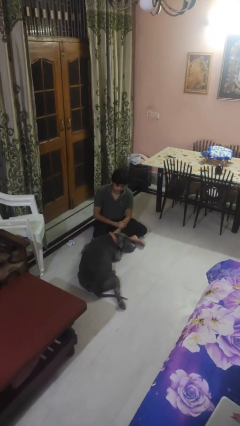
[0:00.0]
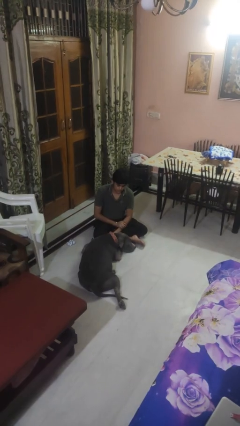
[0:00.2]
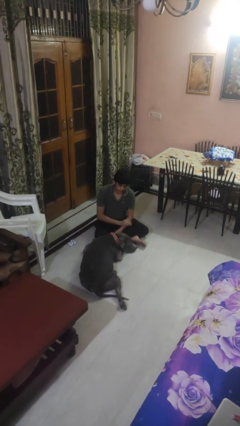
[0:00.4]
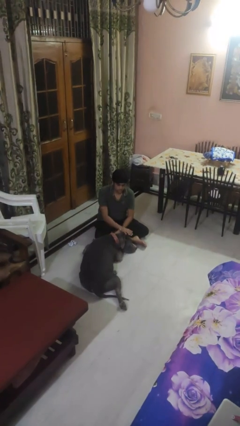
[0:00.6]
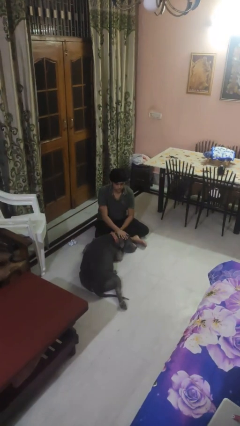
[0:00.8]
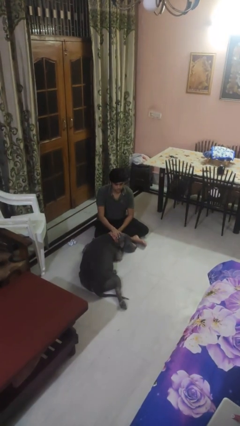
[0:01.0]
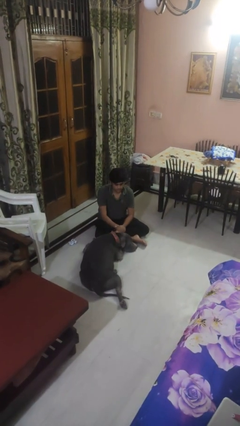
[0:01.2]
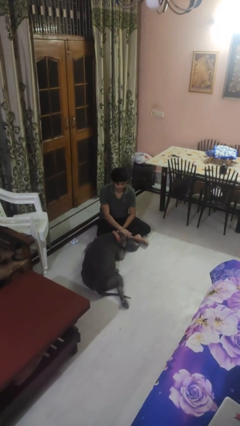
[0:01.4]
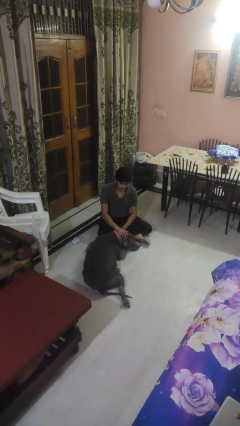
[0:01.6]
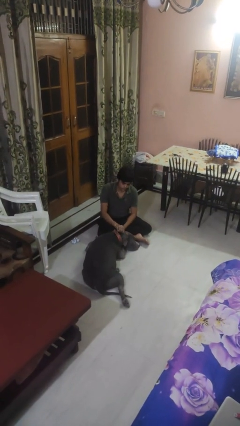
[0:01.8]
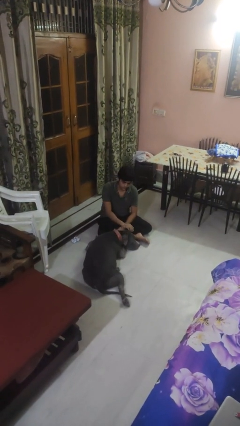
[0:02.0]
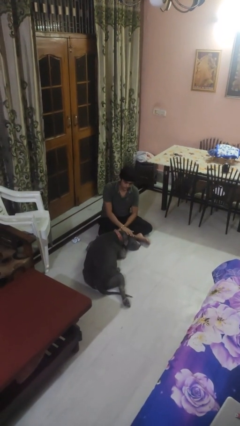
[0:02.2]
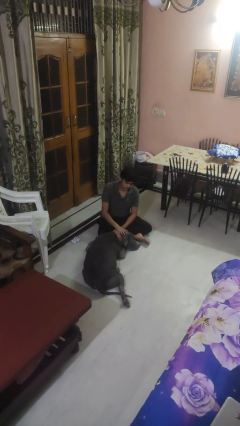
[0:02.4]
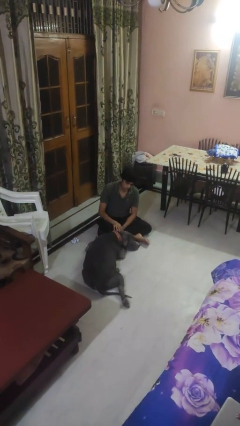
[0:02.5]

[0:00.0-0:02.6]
person pets dog

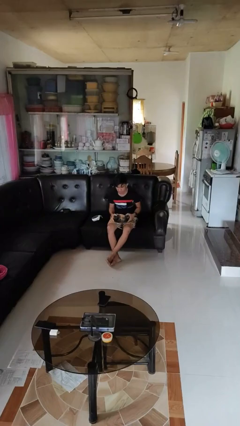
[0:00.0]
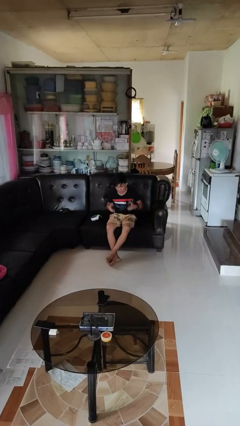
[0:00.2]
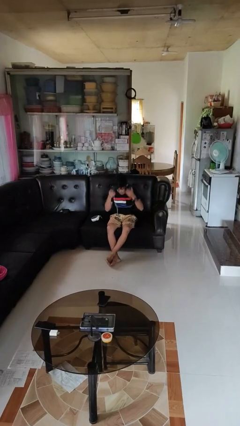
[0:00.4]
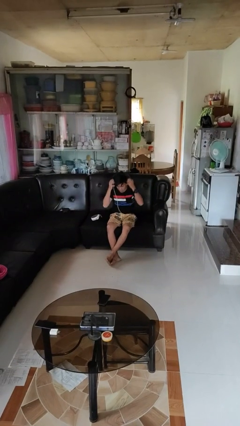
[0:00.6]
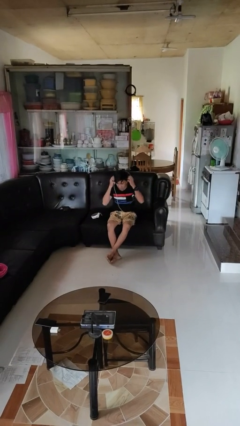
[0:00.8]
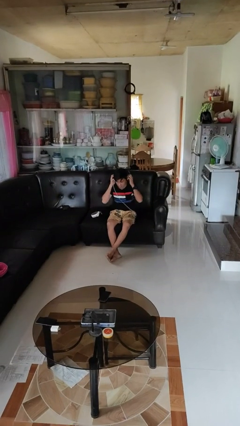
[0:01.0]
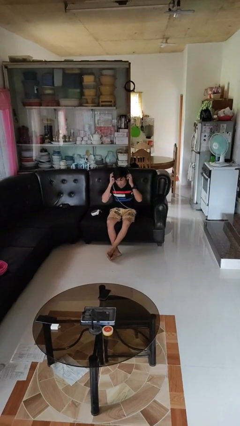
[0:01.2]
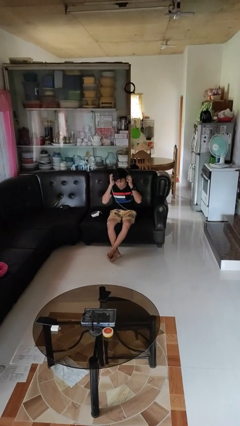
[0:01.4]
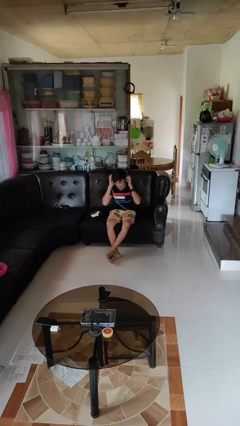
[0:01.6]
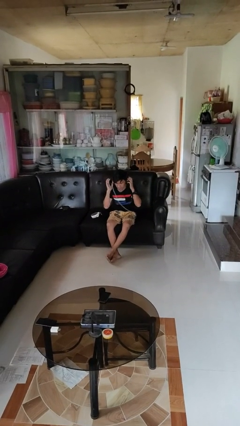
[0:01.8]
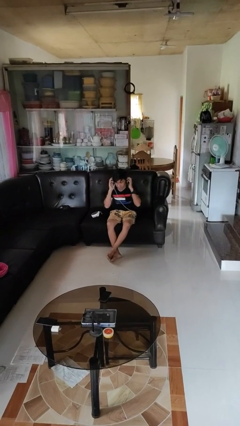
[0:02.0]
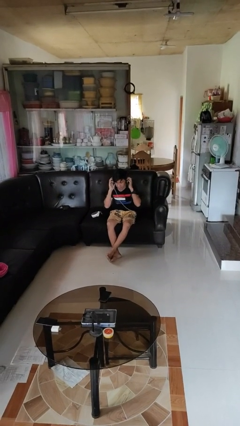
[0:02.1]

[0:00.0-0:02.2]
person puts on headphones

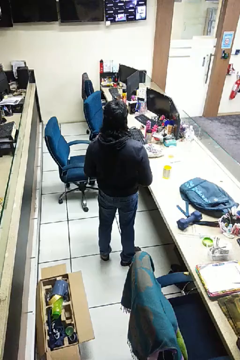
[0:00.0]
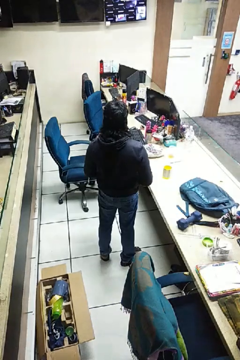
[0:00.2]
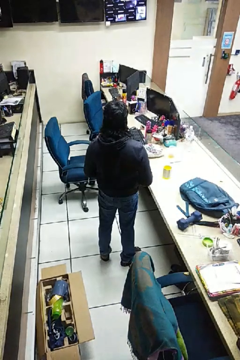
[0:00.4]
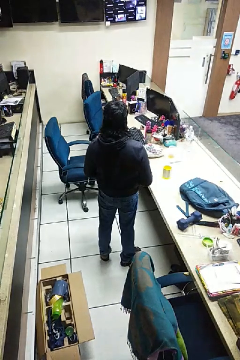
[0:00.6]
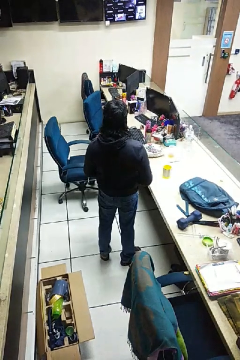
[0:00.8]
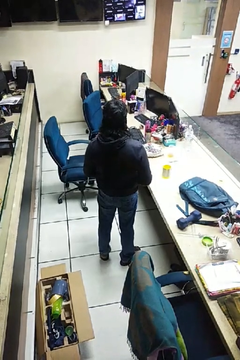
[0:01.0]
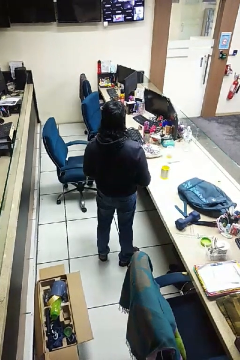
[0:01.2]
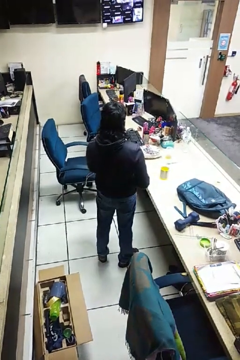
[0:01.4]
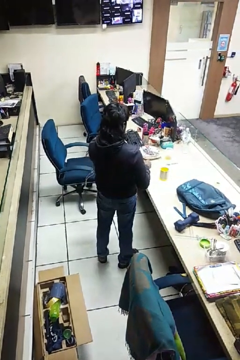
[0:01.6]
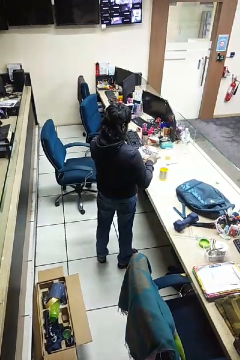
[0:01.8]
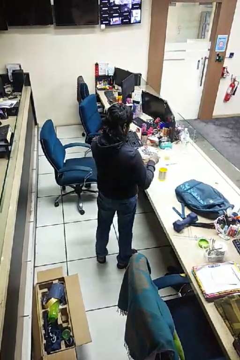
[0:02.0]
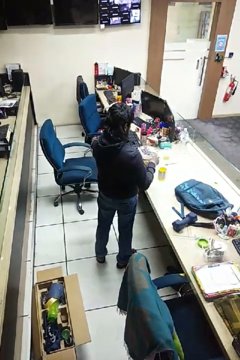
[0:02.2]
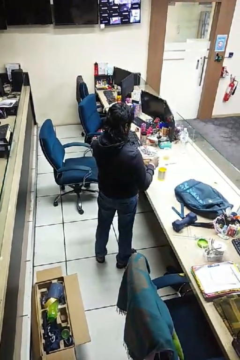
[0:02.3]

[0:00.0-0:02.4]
person opens beverage can

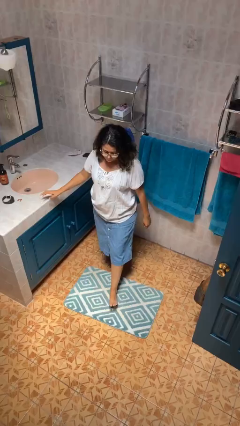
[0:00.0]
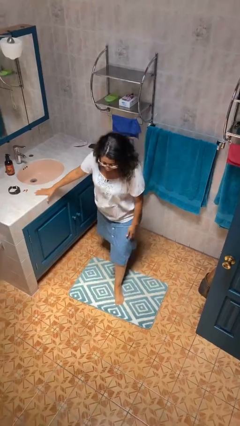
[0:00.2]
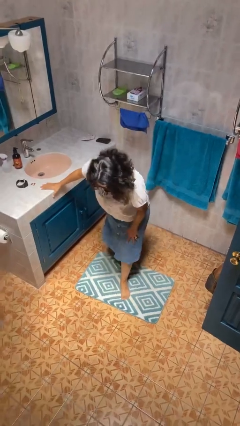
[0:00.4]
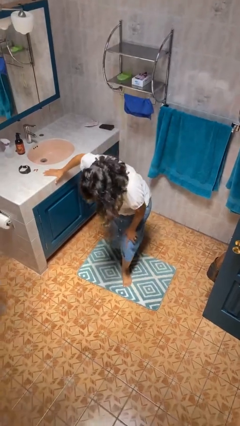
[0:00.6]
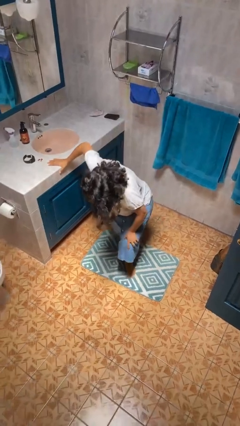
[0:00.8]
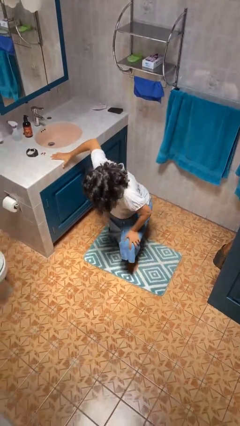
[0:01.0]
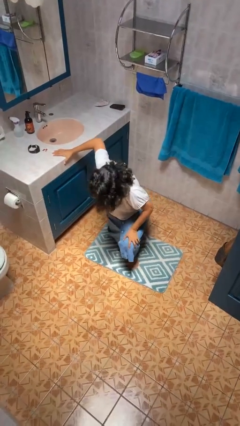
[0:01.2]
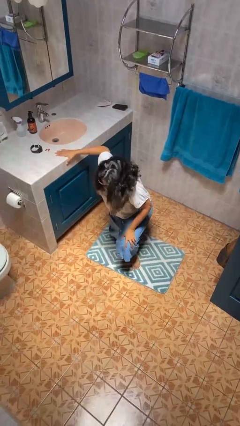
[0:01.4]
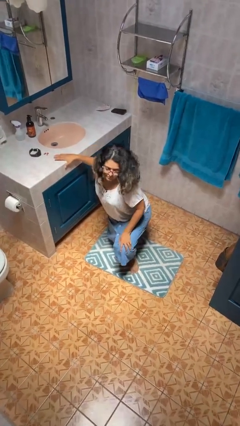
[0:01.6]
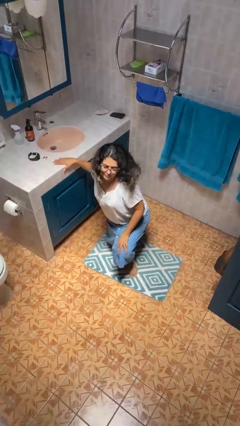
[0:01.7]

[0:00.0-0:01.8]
person kneels

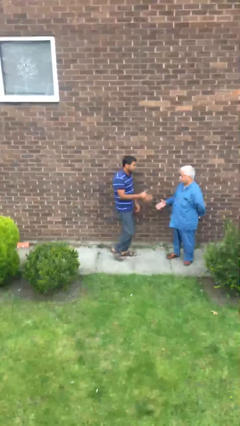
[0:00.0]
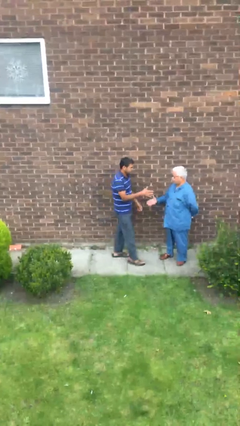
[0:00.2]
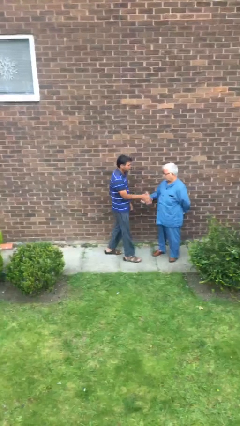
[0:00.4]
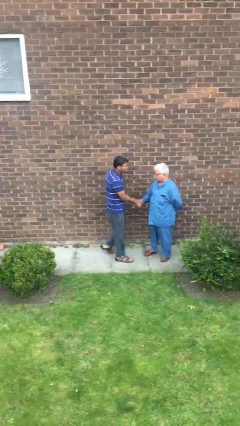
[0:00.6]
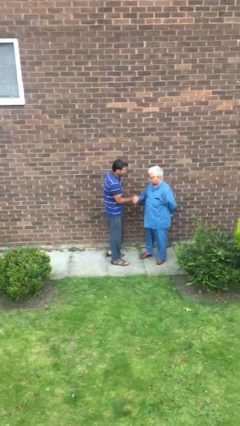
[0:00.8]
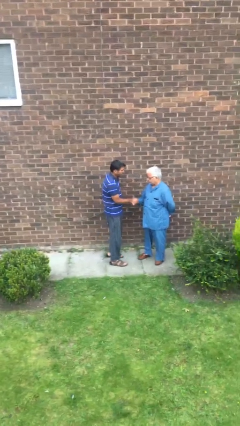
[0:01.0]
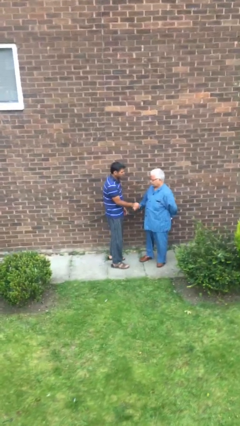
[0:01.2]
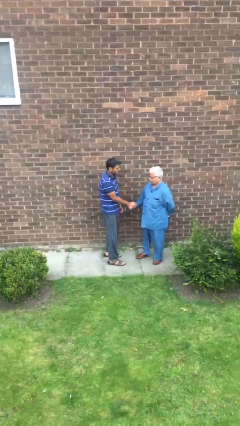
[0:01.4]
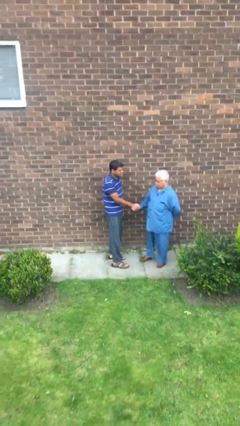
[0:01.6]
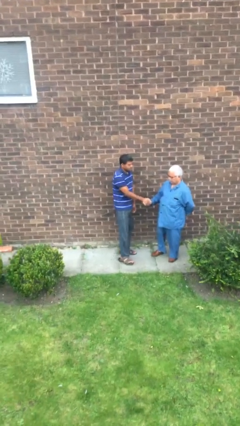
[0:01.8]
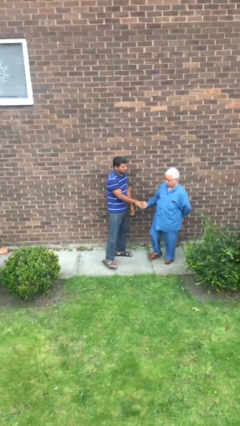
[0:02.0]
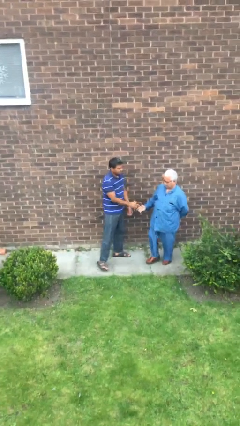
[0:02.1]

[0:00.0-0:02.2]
person shakes hand

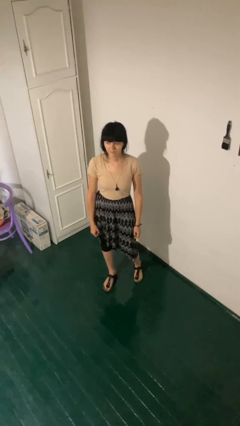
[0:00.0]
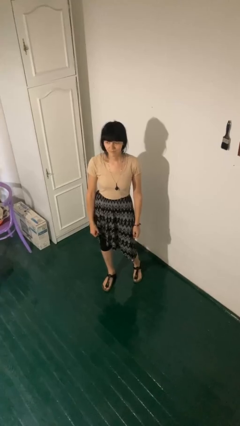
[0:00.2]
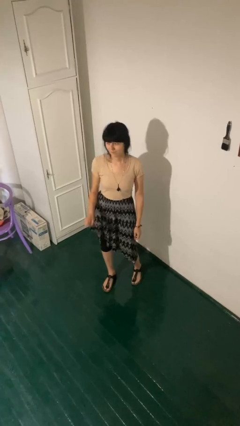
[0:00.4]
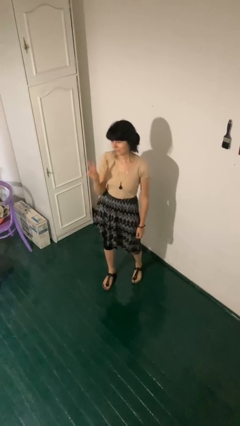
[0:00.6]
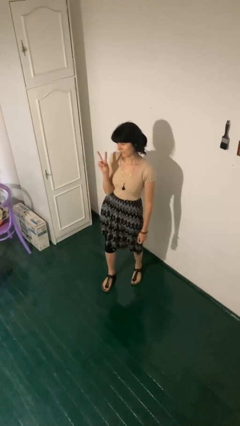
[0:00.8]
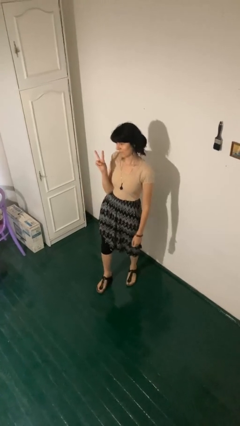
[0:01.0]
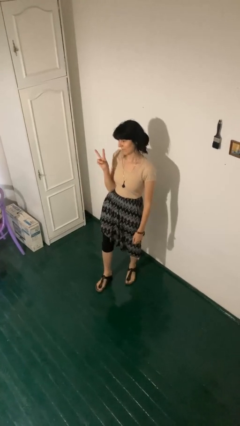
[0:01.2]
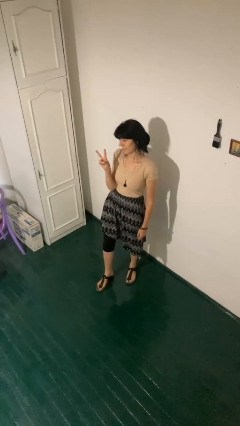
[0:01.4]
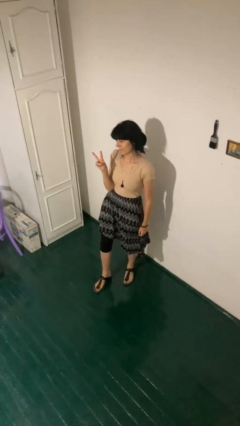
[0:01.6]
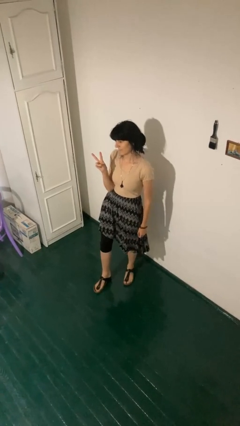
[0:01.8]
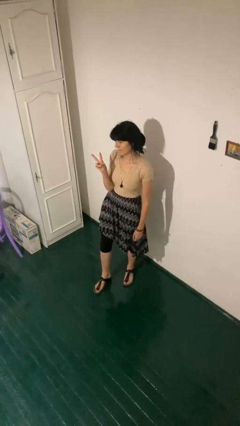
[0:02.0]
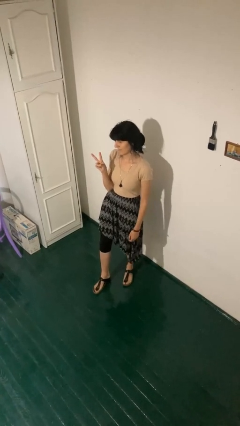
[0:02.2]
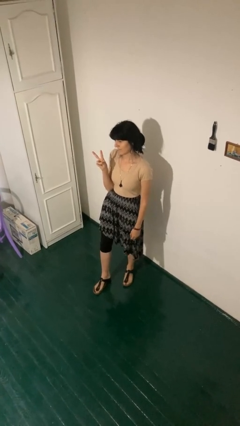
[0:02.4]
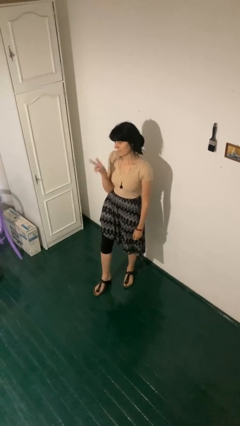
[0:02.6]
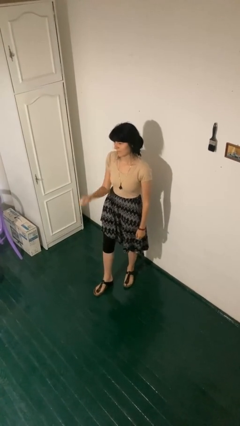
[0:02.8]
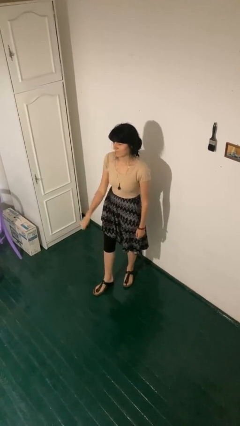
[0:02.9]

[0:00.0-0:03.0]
person gestures peace

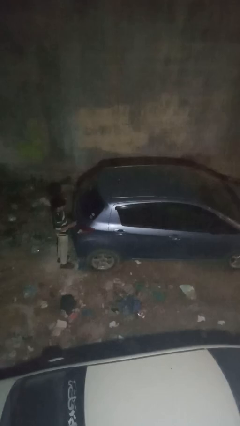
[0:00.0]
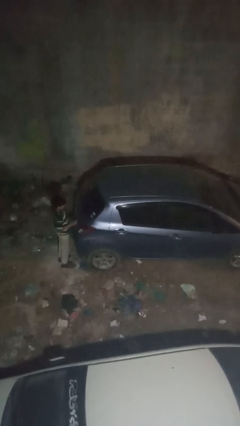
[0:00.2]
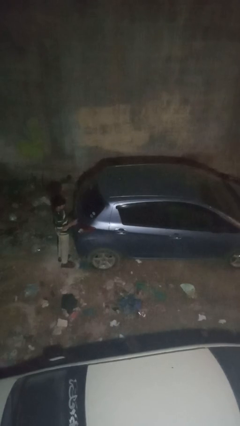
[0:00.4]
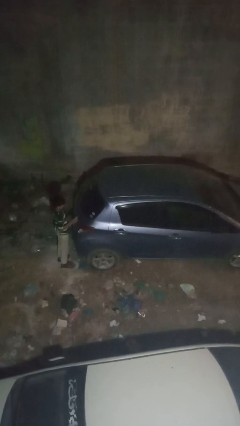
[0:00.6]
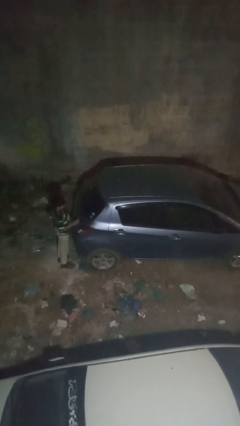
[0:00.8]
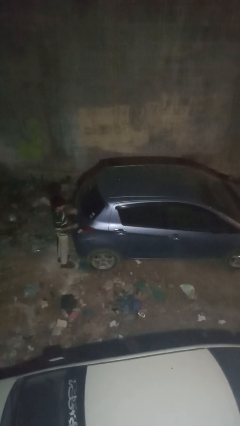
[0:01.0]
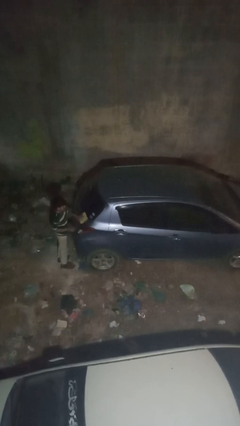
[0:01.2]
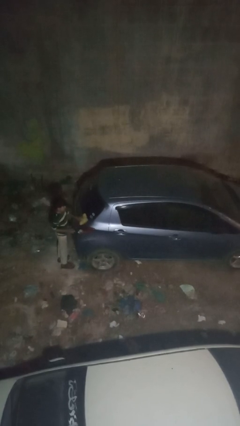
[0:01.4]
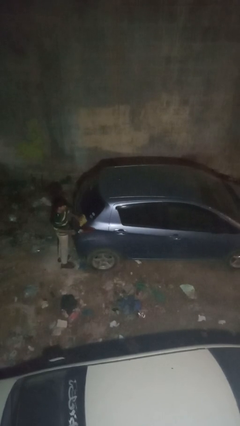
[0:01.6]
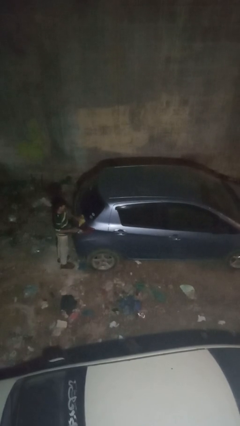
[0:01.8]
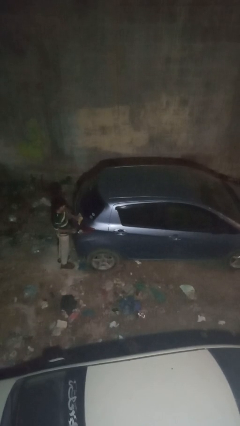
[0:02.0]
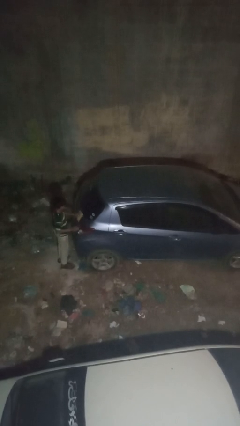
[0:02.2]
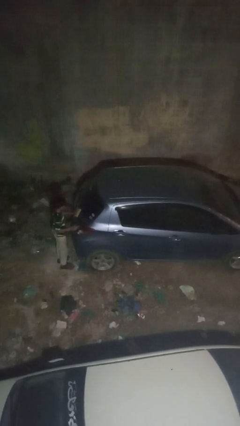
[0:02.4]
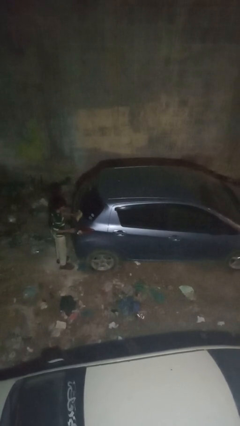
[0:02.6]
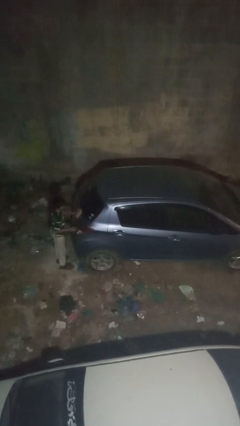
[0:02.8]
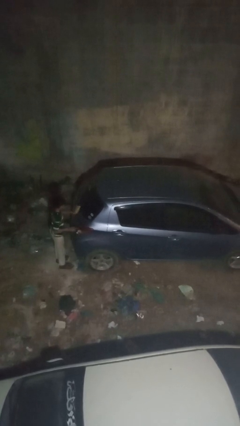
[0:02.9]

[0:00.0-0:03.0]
person polishes car with rag

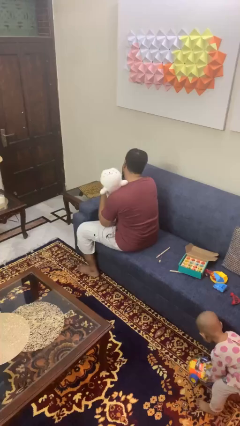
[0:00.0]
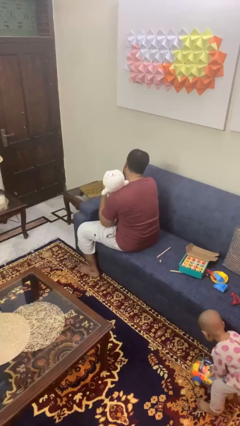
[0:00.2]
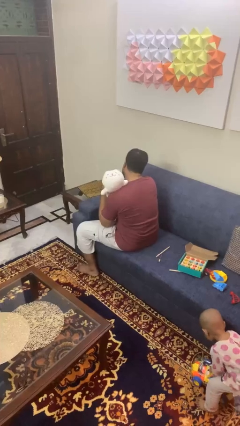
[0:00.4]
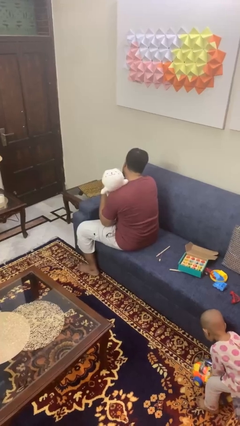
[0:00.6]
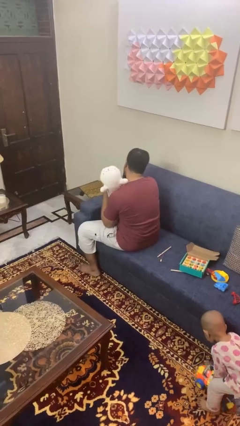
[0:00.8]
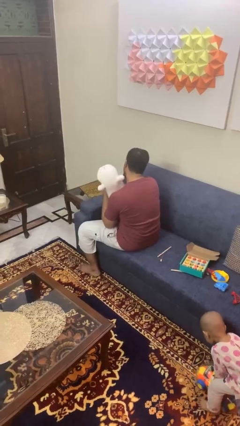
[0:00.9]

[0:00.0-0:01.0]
person hugs stuffed animal
